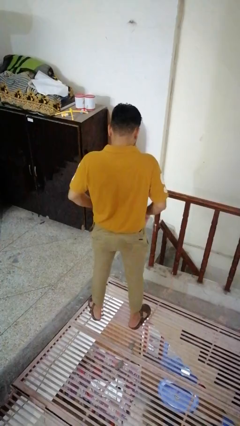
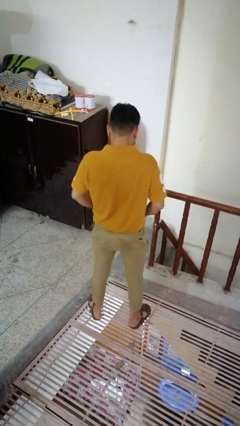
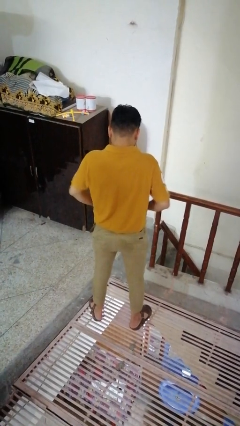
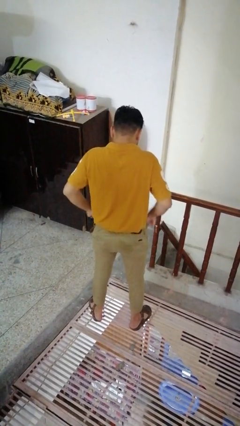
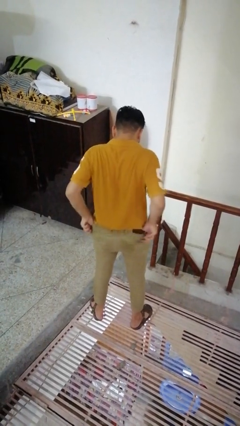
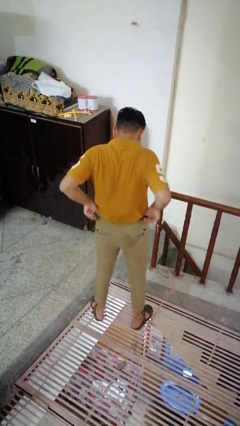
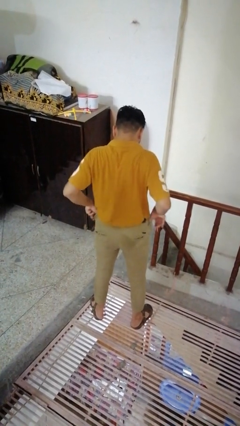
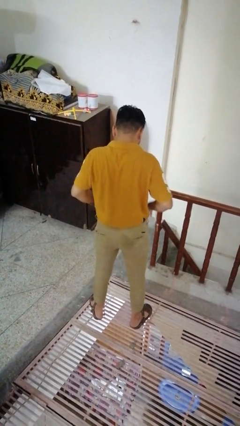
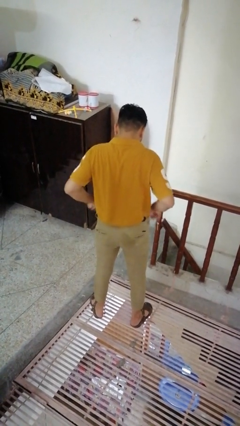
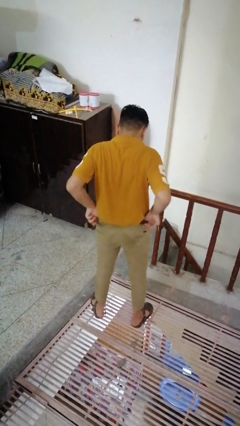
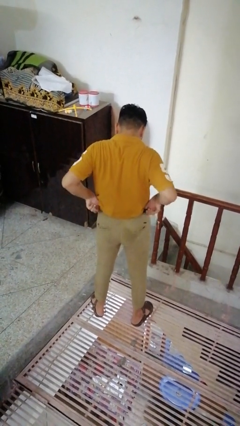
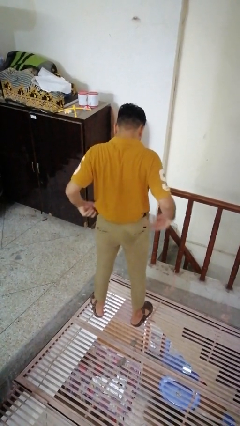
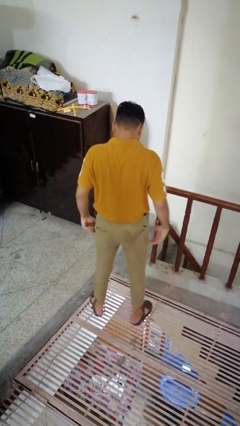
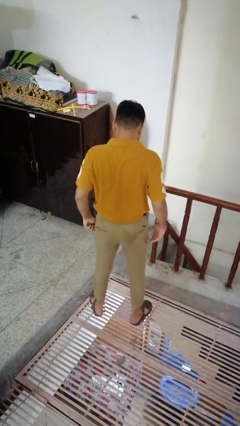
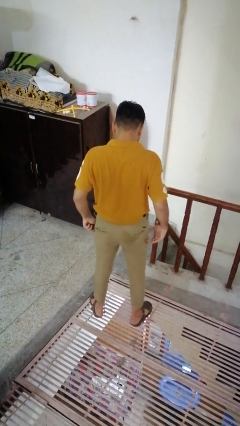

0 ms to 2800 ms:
person hikes up pants

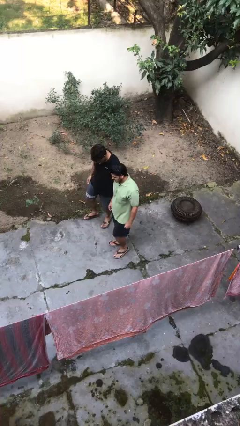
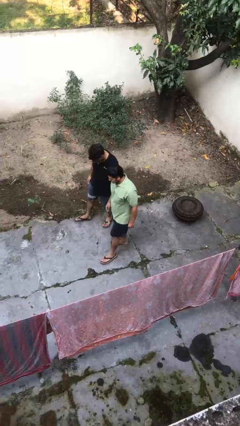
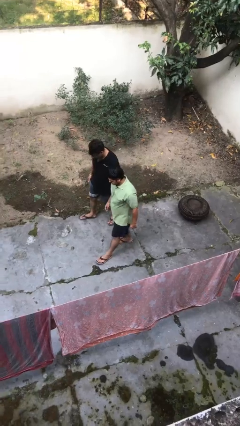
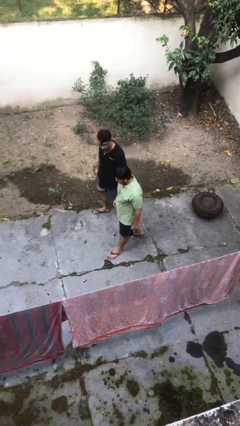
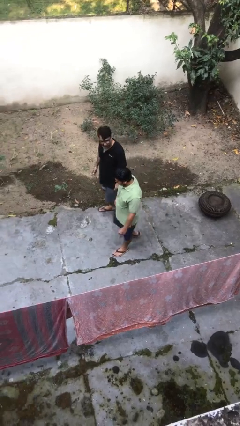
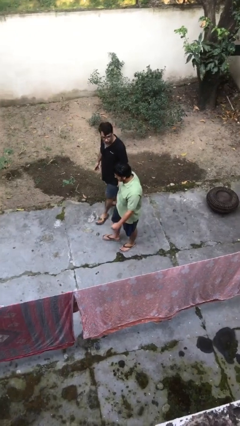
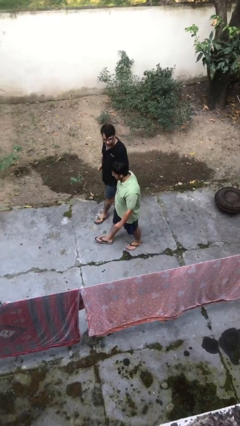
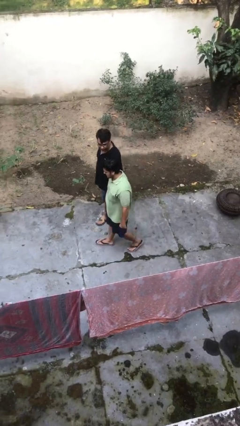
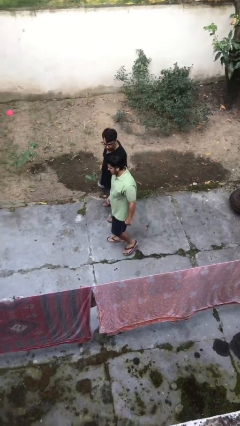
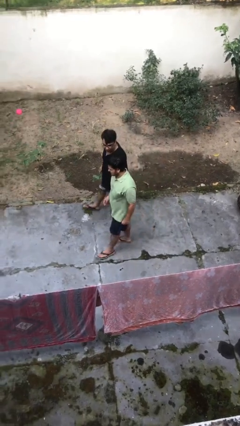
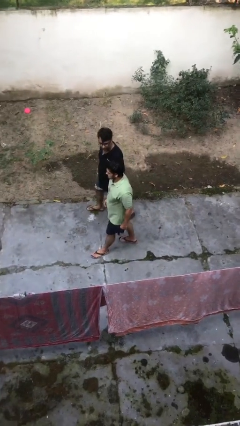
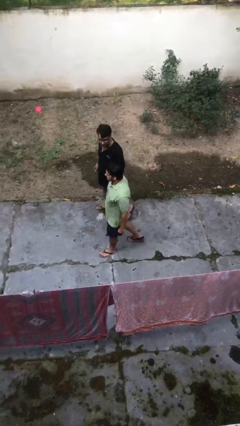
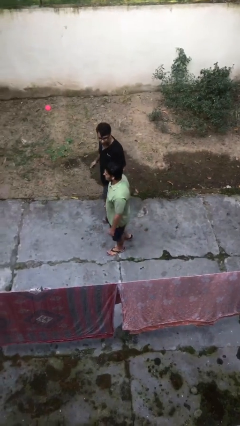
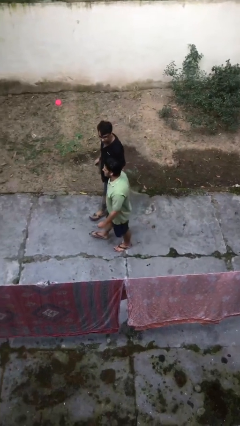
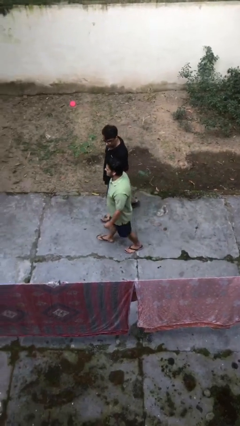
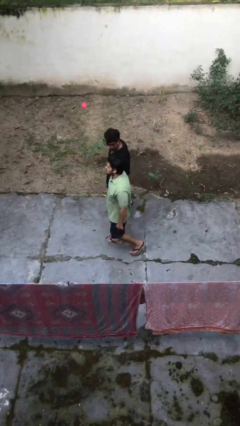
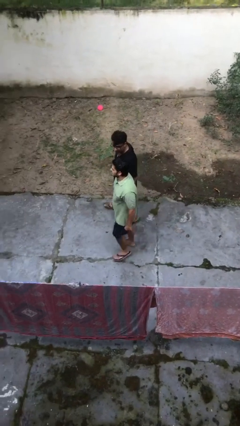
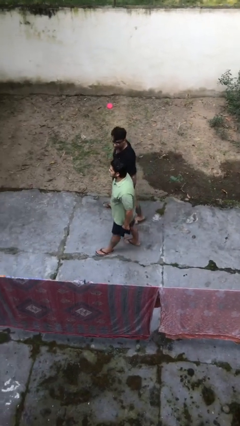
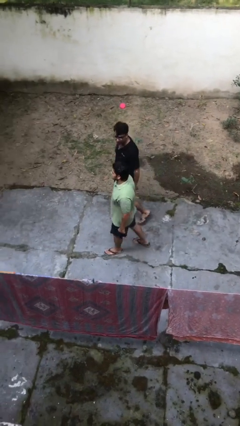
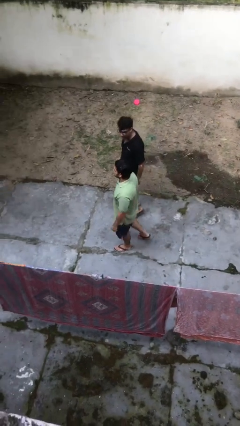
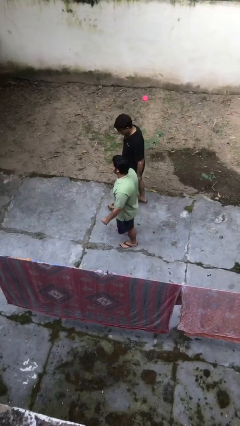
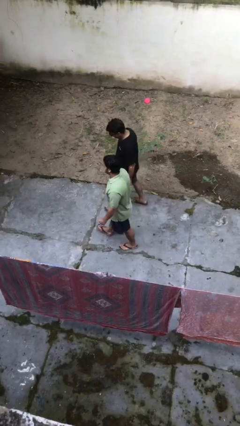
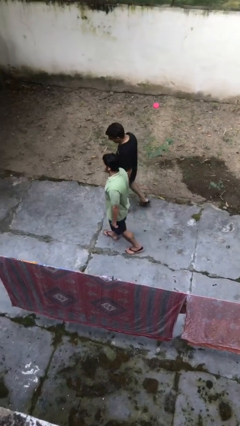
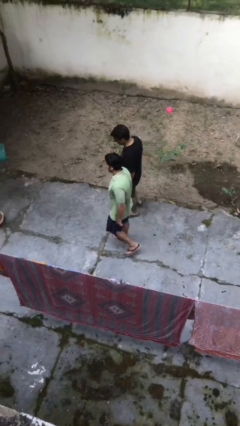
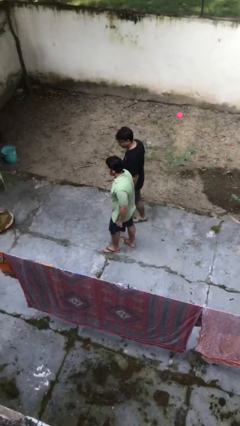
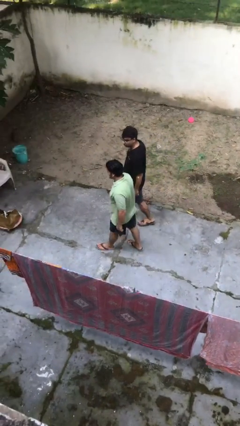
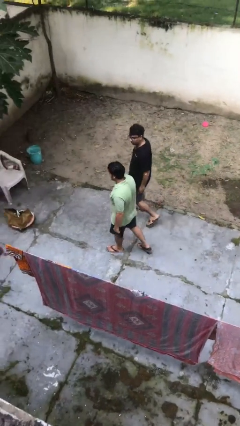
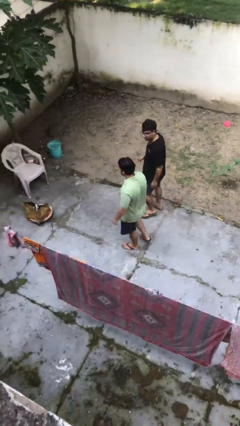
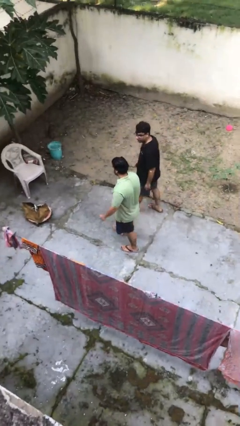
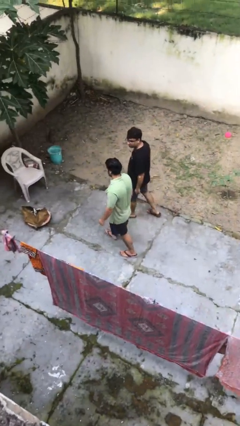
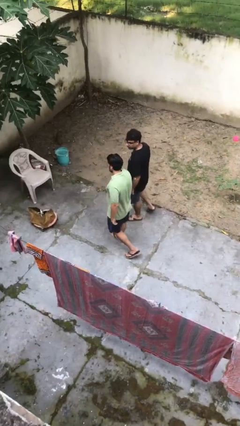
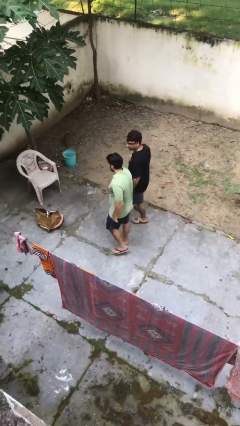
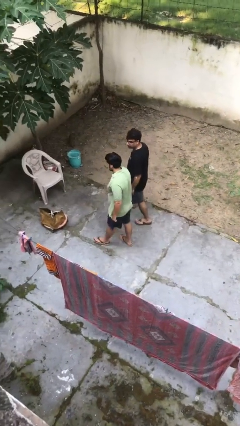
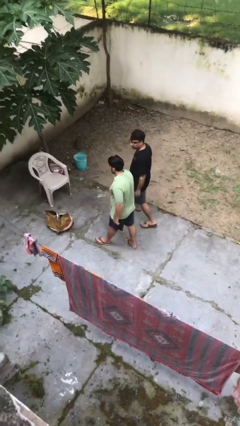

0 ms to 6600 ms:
person talks to person

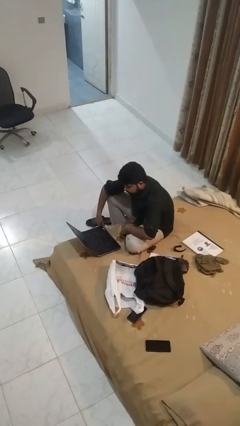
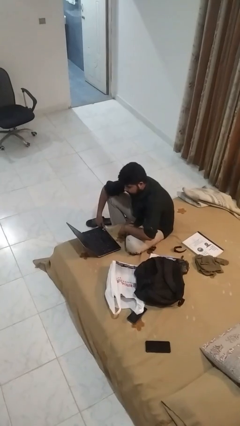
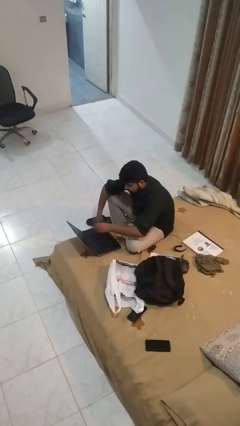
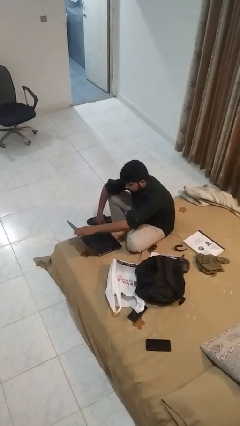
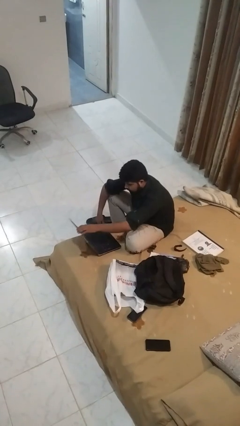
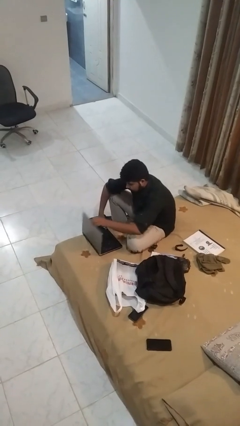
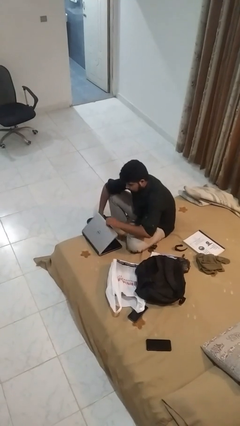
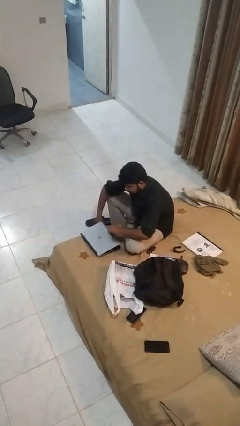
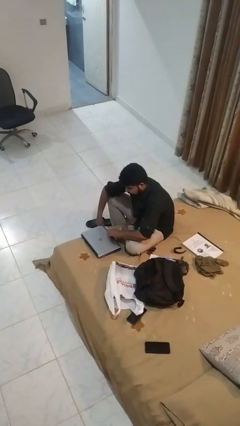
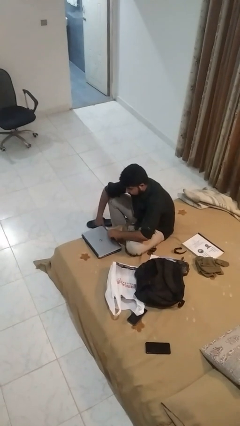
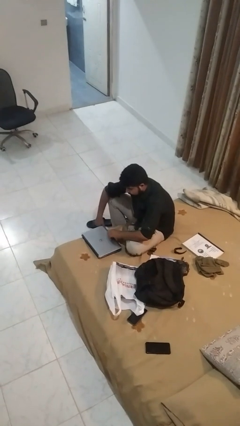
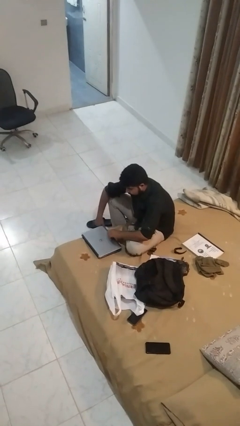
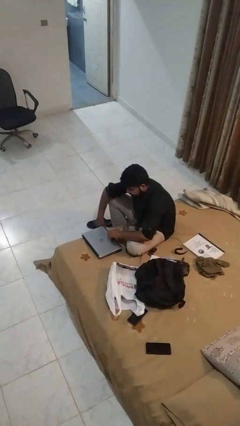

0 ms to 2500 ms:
person closes laptop

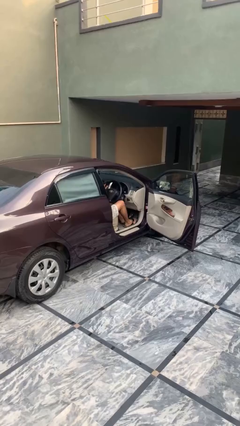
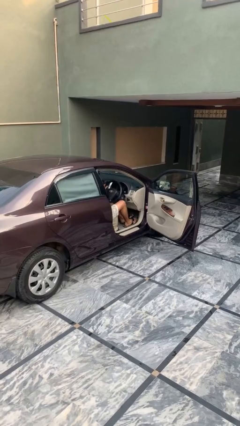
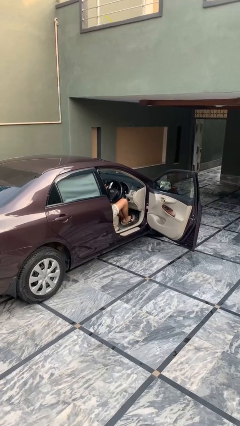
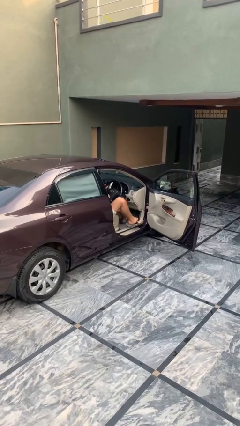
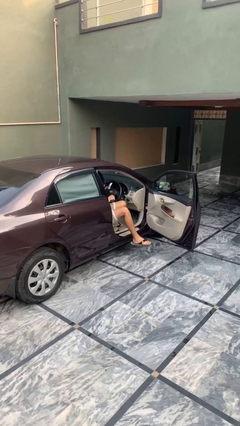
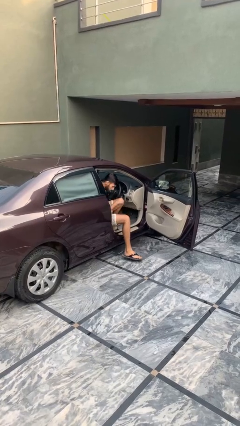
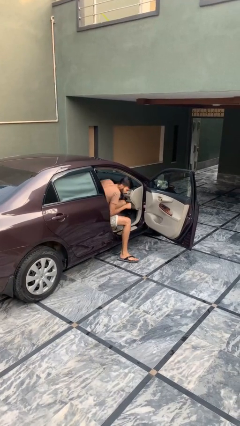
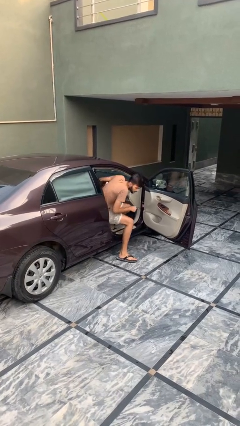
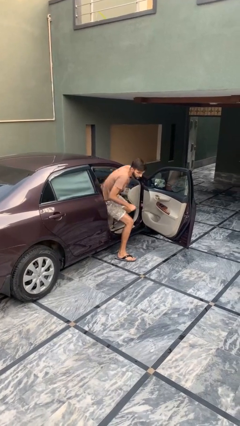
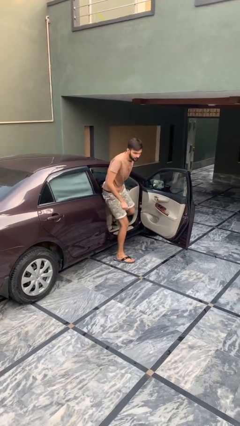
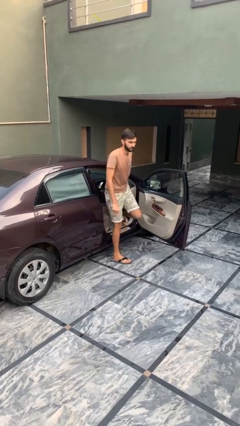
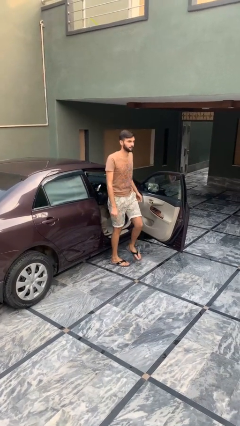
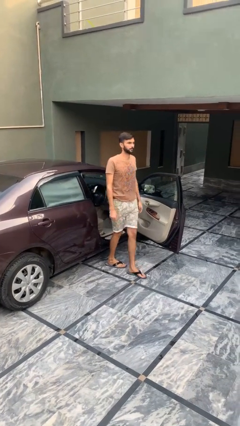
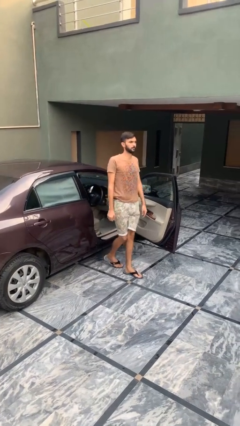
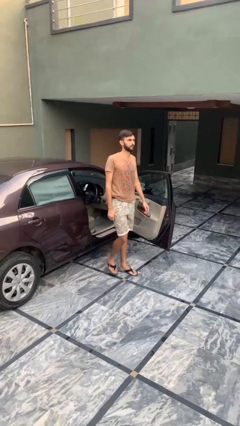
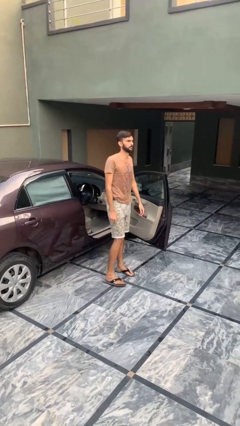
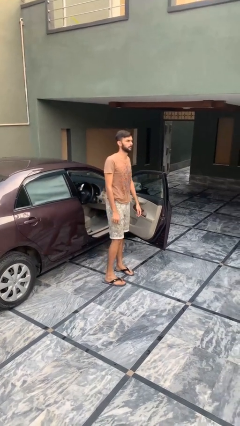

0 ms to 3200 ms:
person exits car

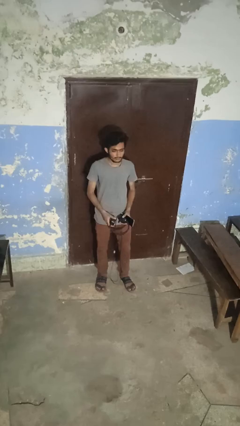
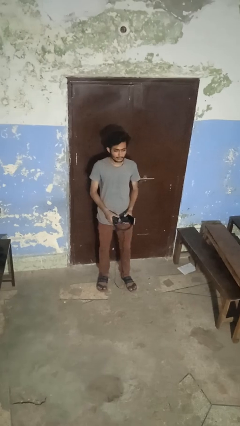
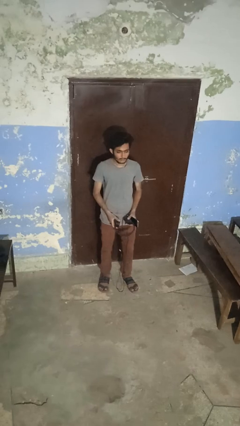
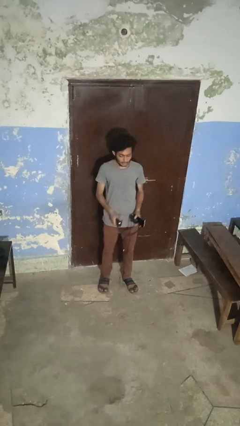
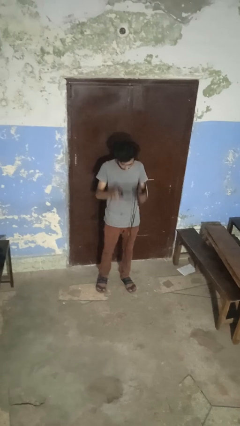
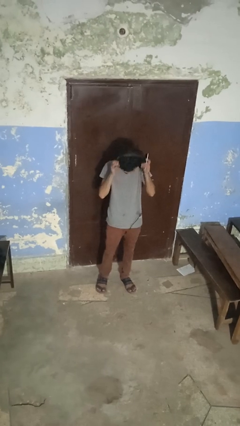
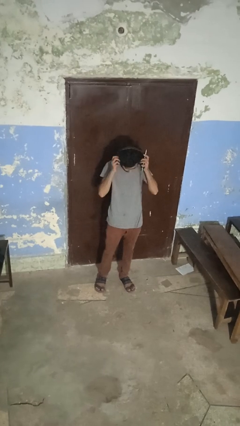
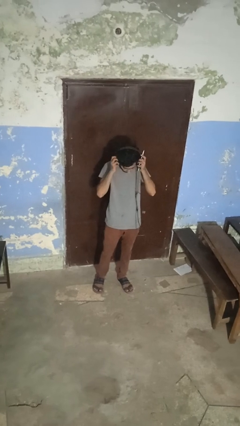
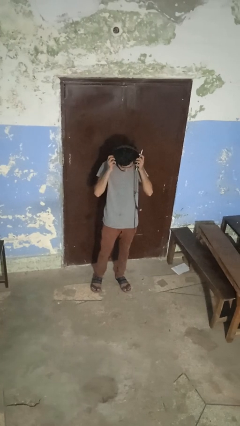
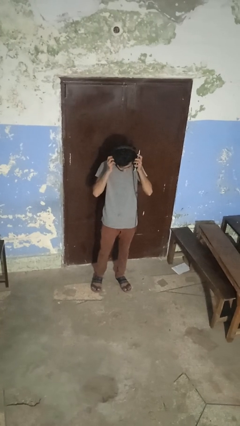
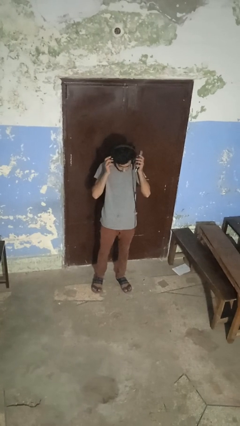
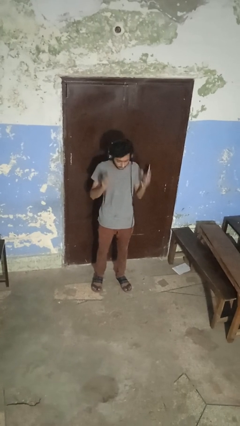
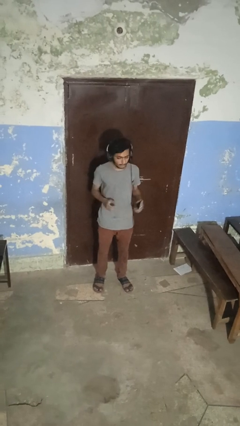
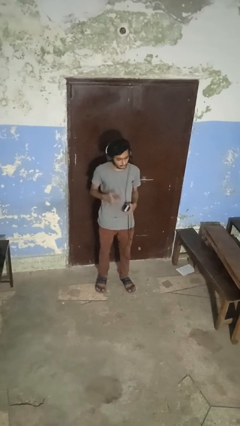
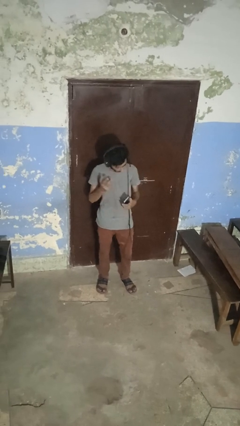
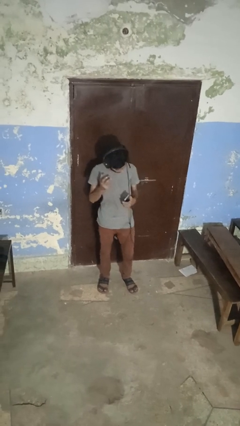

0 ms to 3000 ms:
person puts on headphones
